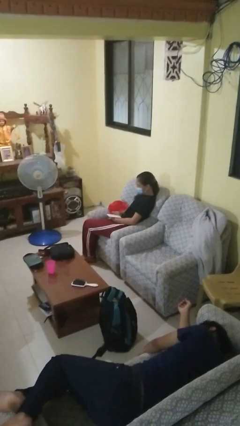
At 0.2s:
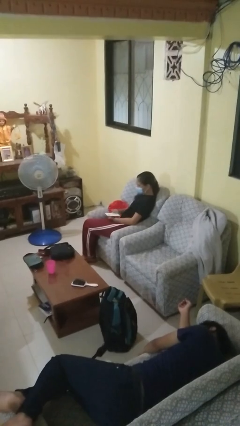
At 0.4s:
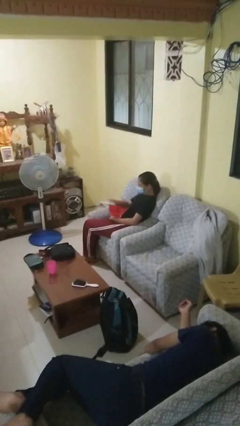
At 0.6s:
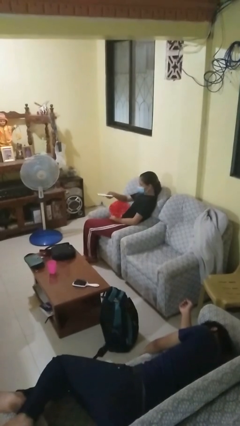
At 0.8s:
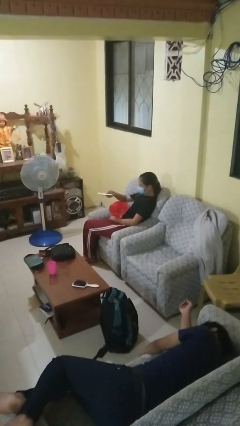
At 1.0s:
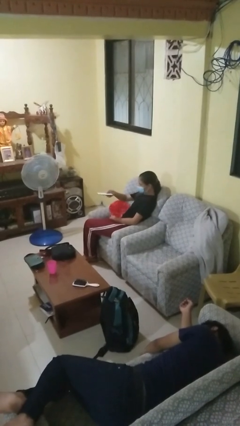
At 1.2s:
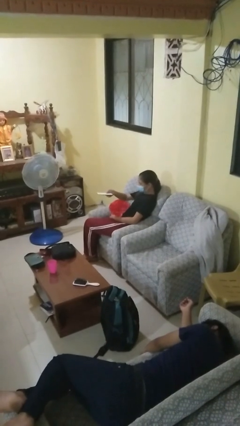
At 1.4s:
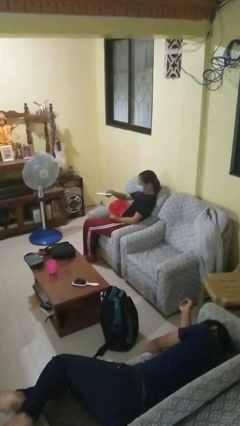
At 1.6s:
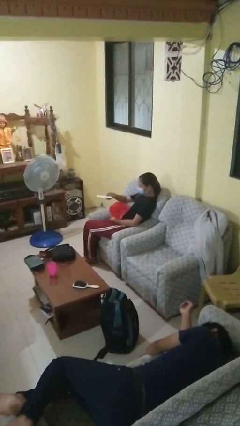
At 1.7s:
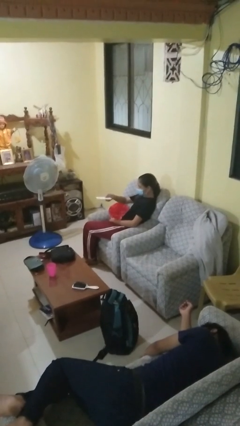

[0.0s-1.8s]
person uses television remote

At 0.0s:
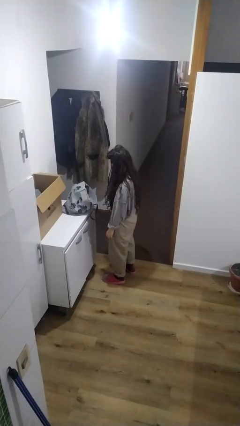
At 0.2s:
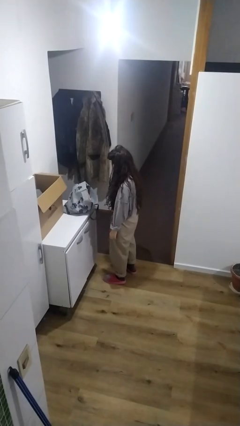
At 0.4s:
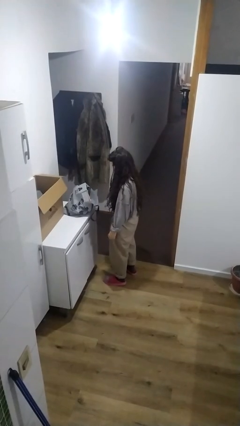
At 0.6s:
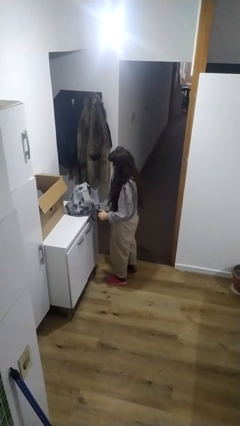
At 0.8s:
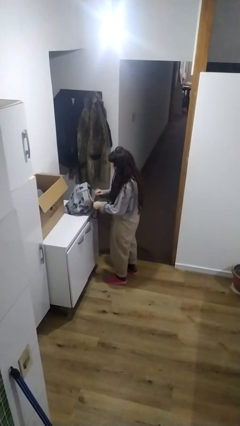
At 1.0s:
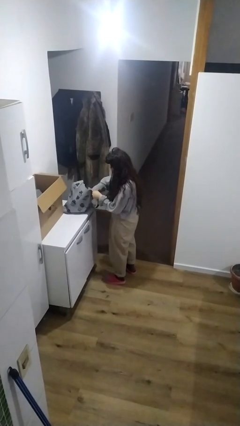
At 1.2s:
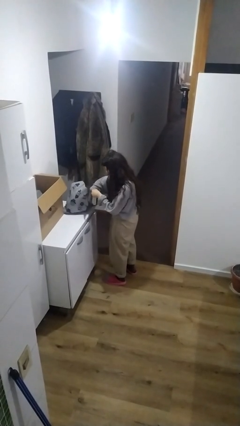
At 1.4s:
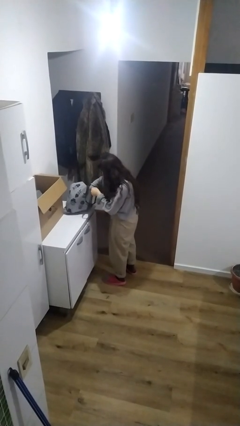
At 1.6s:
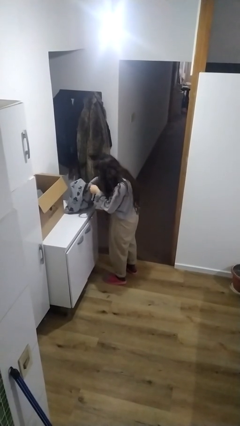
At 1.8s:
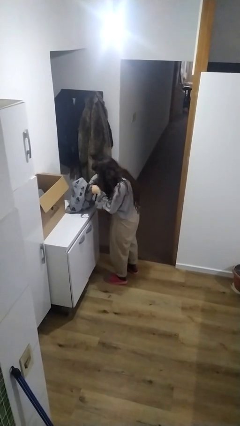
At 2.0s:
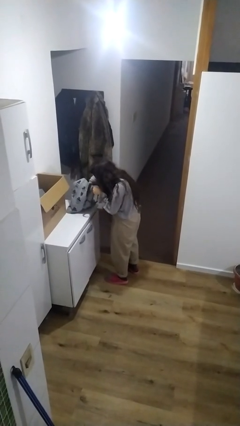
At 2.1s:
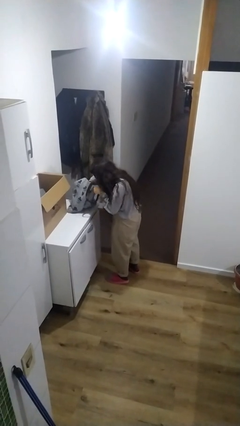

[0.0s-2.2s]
person searches in bag

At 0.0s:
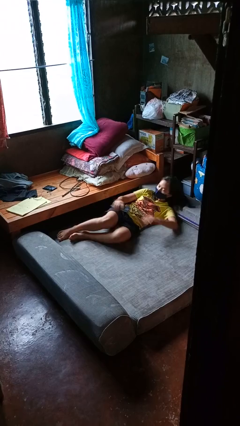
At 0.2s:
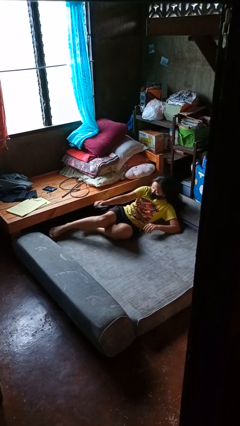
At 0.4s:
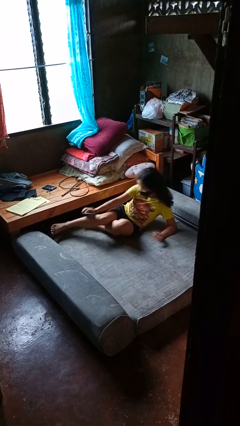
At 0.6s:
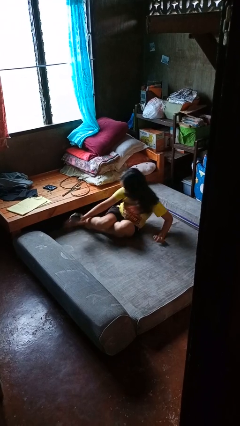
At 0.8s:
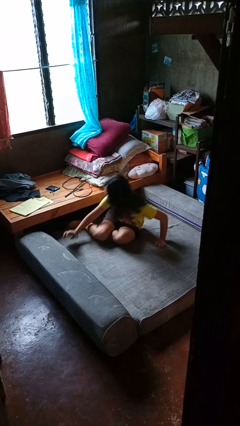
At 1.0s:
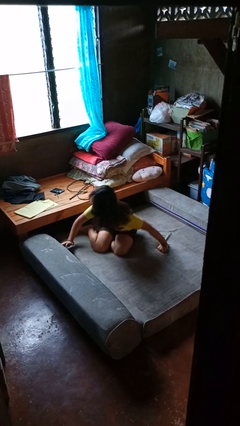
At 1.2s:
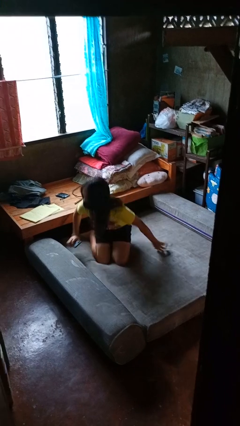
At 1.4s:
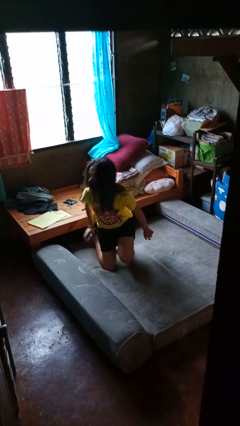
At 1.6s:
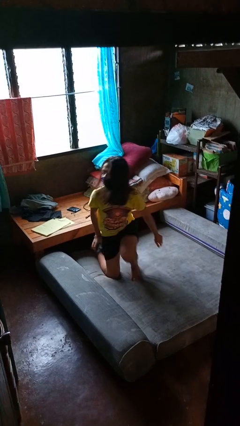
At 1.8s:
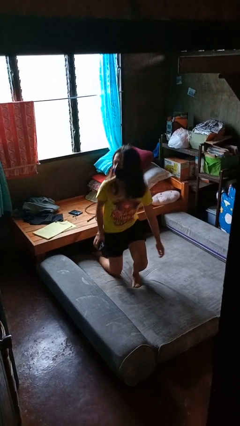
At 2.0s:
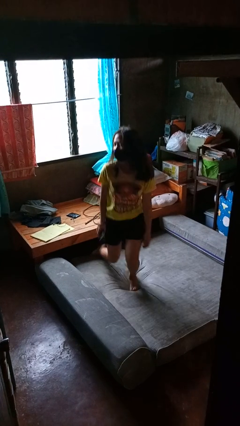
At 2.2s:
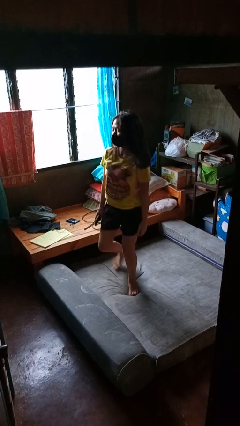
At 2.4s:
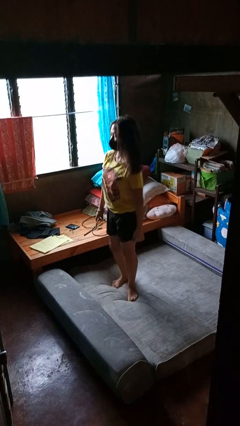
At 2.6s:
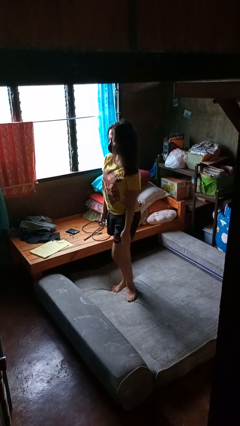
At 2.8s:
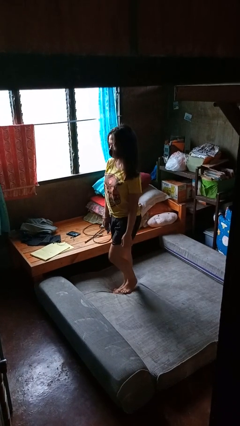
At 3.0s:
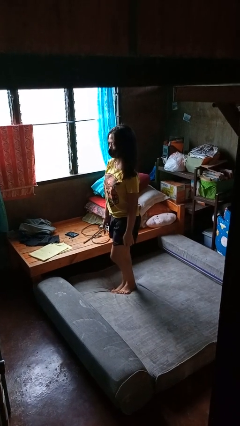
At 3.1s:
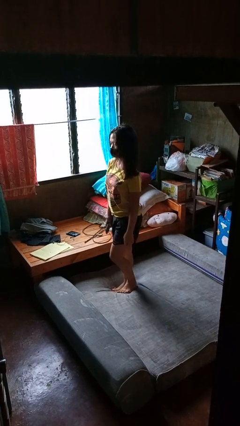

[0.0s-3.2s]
person stands up

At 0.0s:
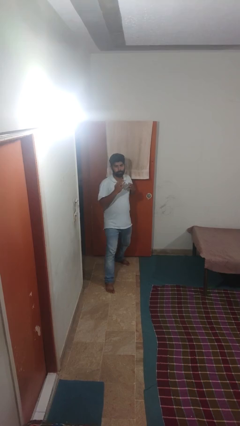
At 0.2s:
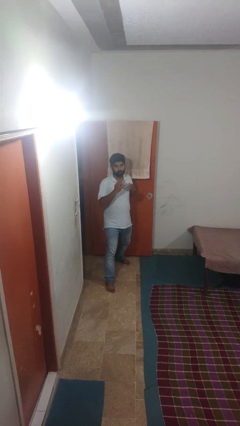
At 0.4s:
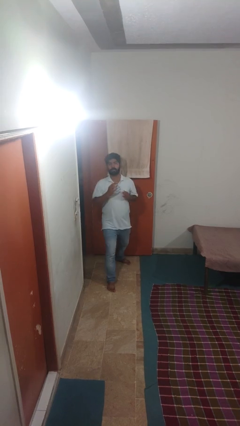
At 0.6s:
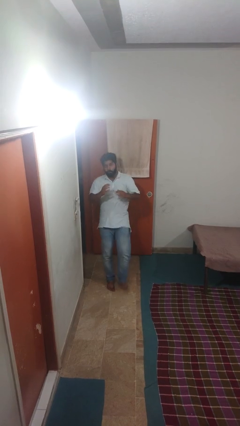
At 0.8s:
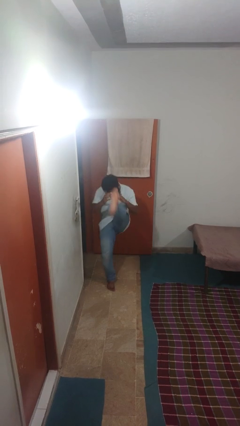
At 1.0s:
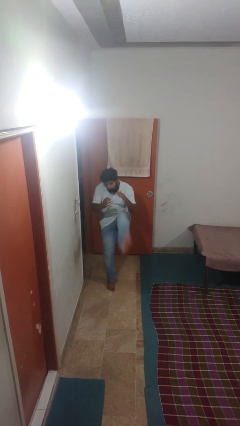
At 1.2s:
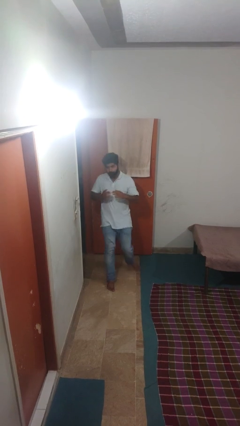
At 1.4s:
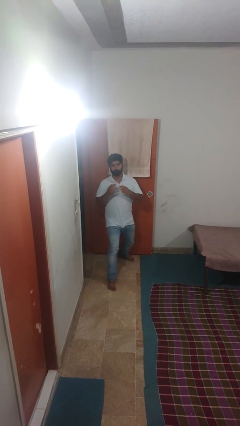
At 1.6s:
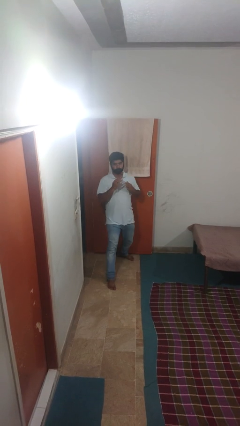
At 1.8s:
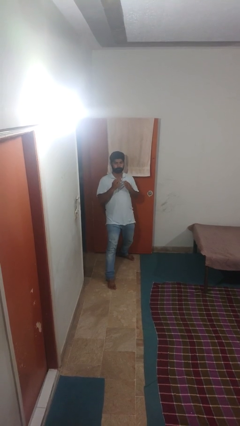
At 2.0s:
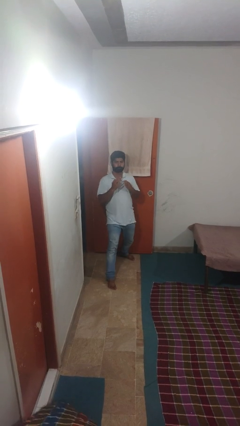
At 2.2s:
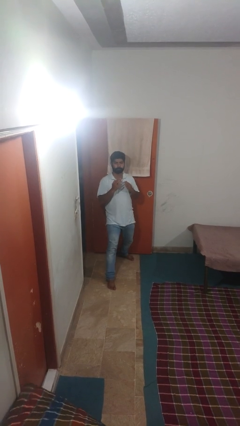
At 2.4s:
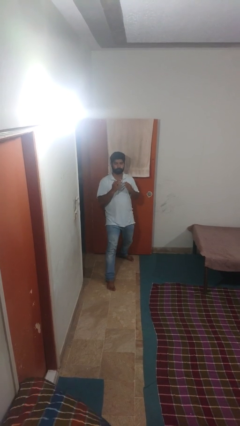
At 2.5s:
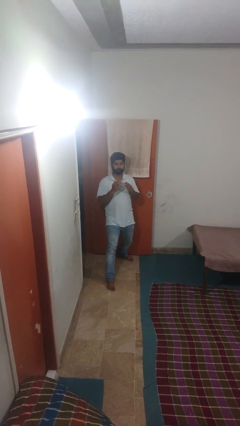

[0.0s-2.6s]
person karate kicks

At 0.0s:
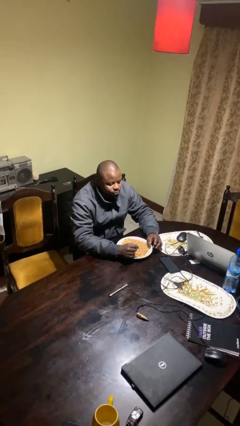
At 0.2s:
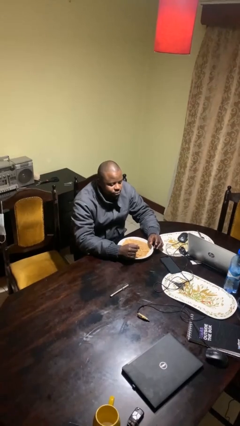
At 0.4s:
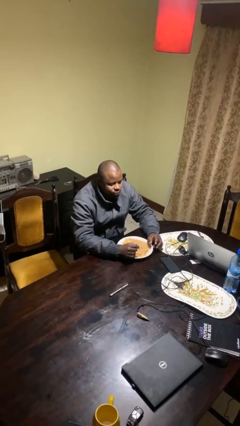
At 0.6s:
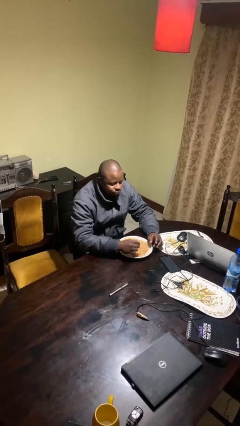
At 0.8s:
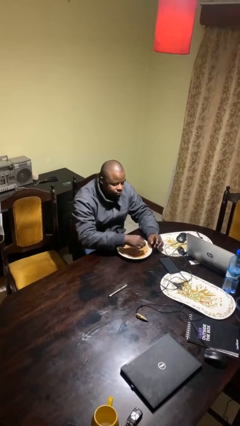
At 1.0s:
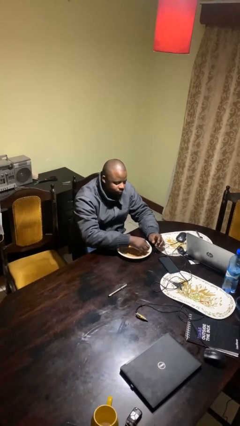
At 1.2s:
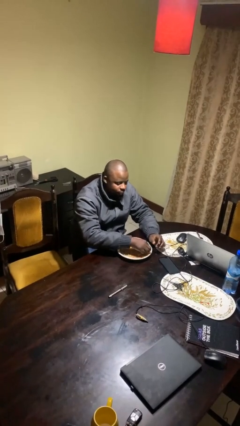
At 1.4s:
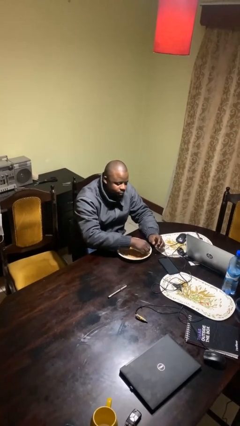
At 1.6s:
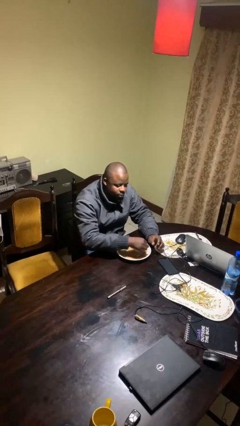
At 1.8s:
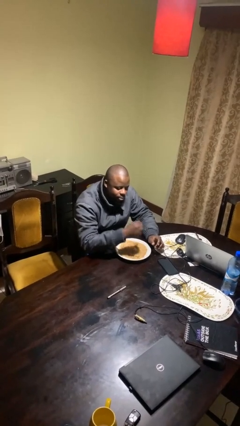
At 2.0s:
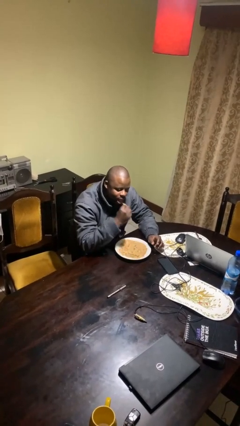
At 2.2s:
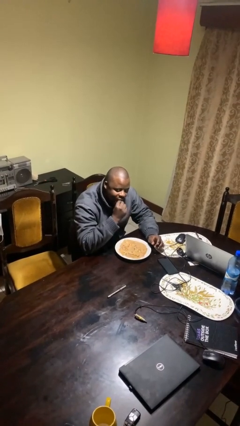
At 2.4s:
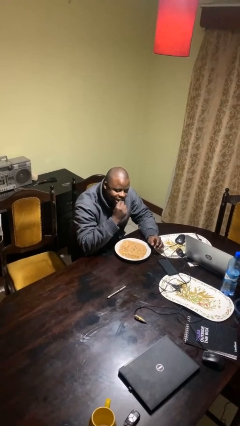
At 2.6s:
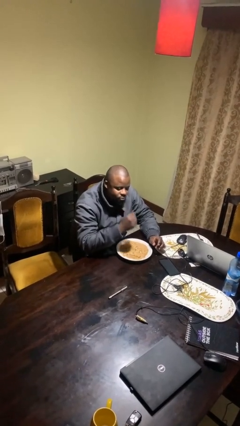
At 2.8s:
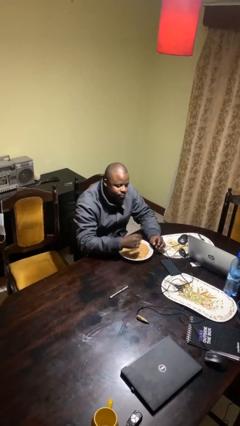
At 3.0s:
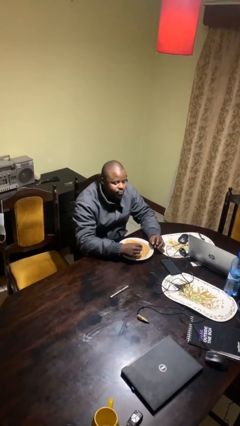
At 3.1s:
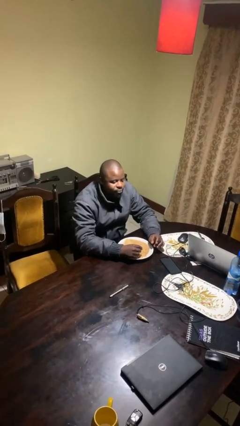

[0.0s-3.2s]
person eats with hands

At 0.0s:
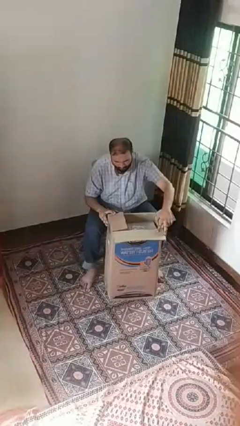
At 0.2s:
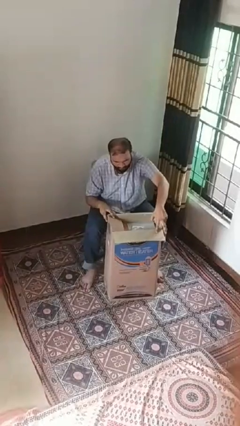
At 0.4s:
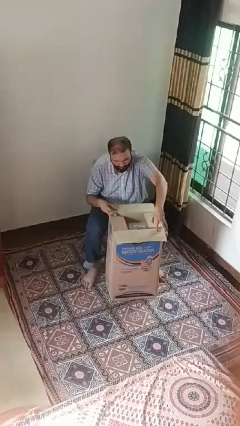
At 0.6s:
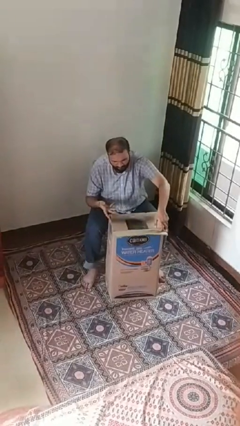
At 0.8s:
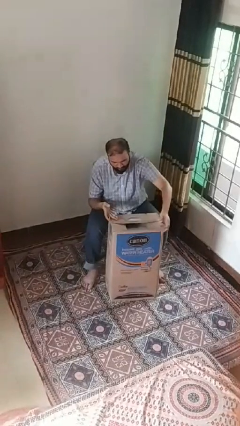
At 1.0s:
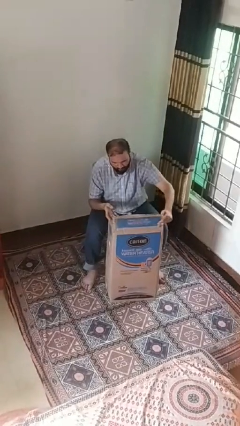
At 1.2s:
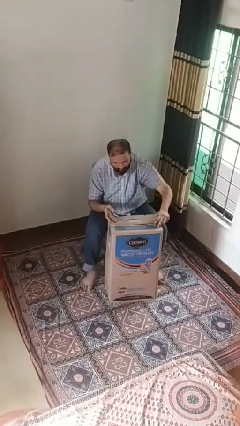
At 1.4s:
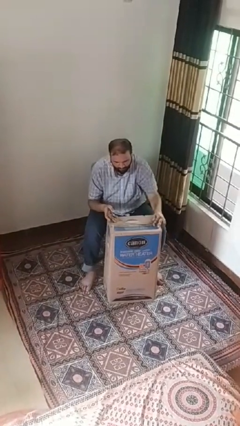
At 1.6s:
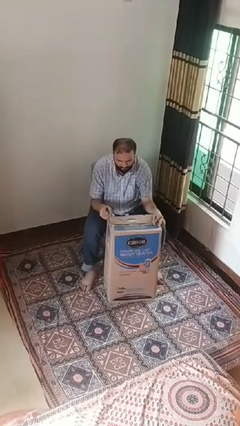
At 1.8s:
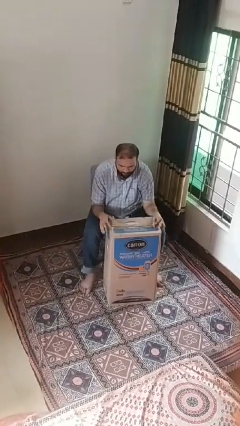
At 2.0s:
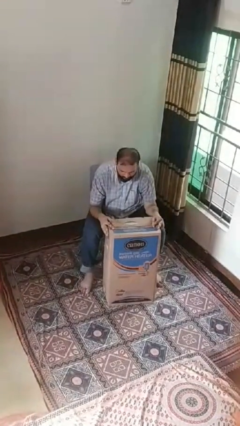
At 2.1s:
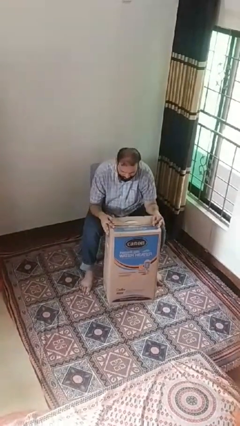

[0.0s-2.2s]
person closes box

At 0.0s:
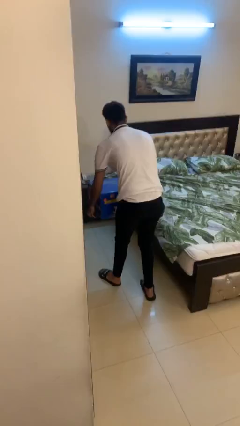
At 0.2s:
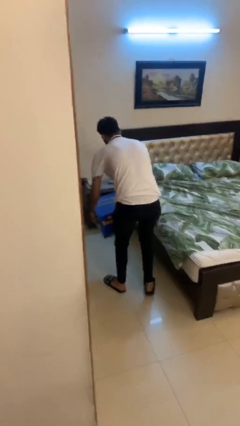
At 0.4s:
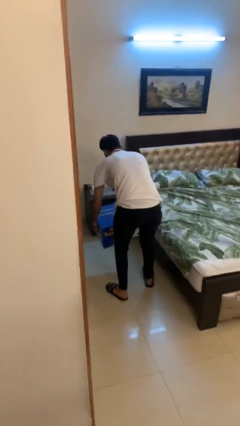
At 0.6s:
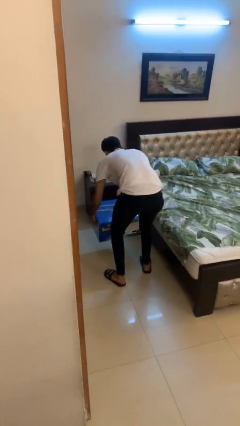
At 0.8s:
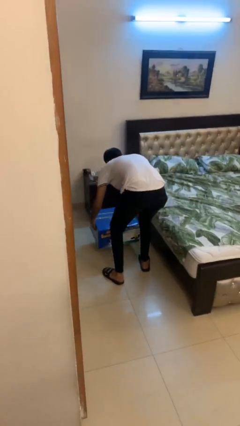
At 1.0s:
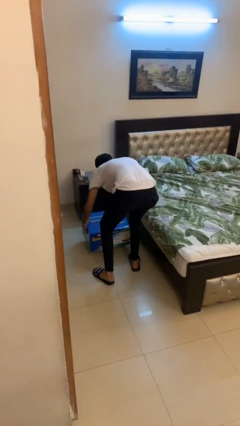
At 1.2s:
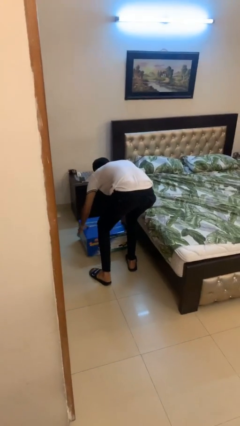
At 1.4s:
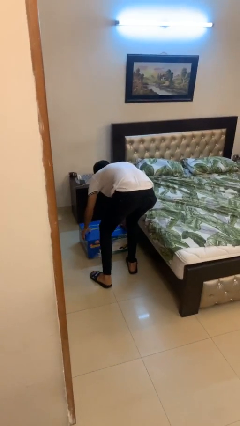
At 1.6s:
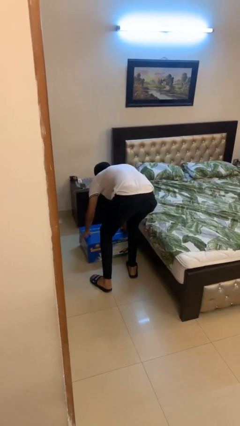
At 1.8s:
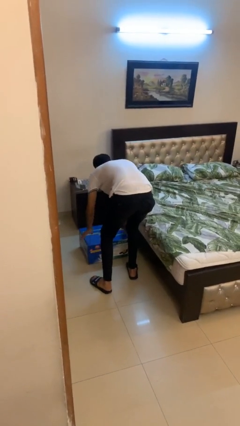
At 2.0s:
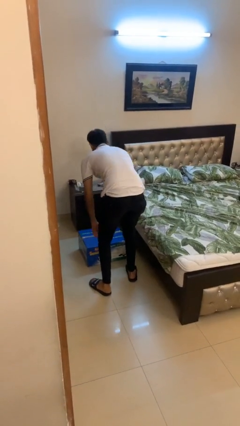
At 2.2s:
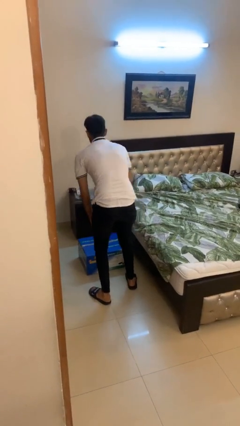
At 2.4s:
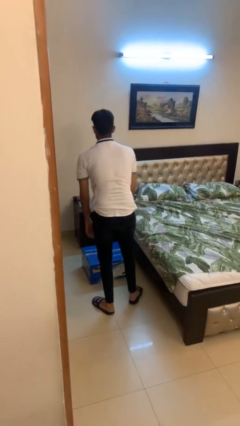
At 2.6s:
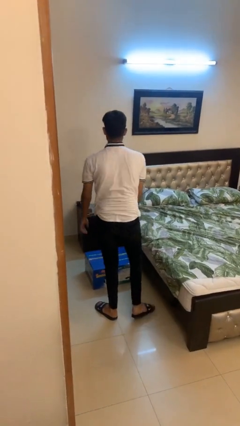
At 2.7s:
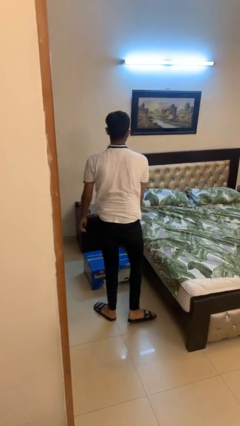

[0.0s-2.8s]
person puts down object on floor
